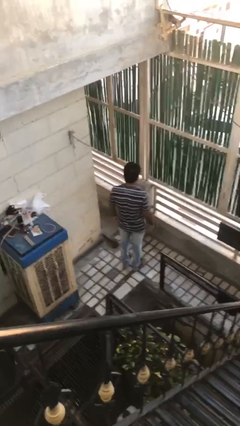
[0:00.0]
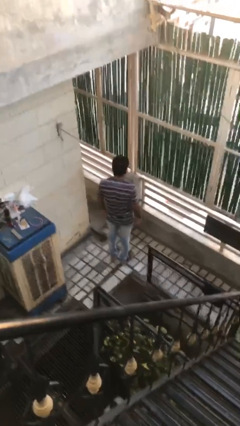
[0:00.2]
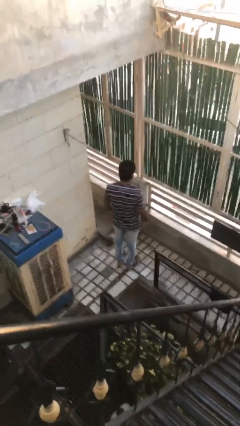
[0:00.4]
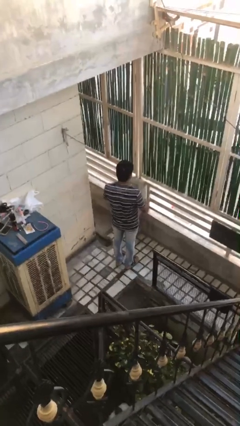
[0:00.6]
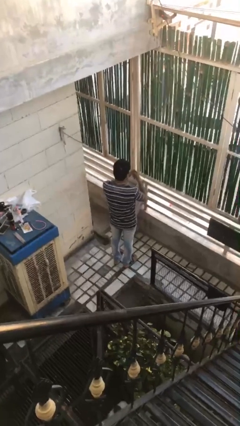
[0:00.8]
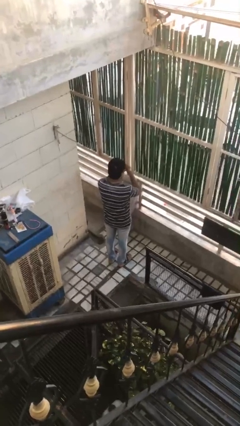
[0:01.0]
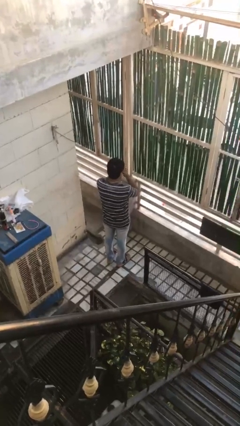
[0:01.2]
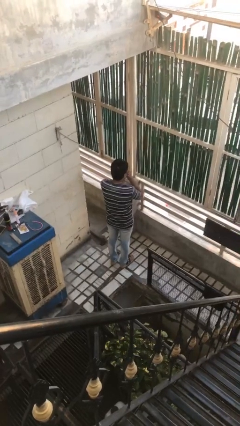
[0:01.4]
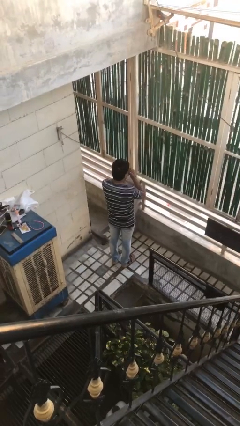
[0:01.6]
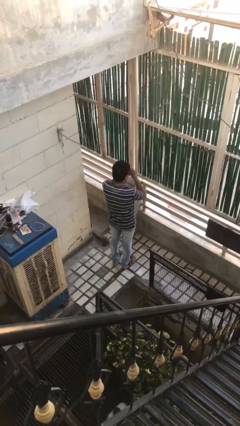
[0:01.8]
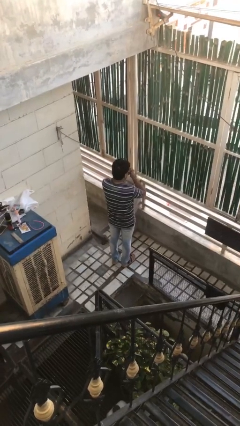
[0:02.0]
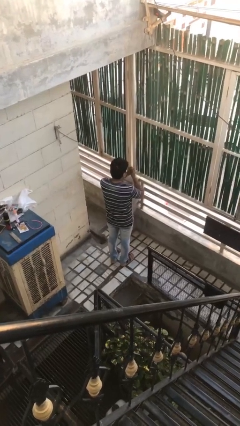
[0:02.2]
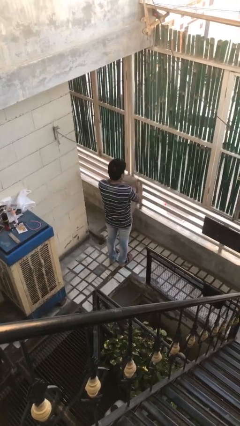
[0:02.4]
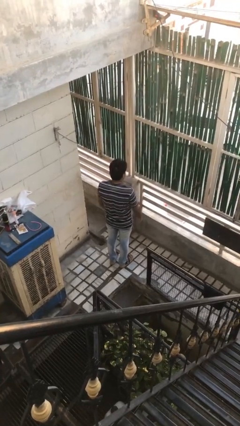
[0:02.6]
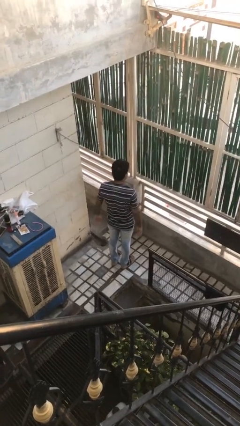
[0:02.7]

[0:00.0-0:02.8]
person snaps fingers

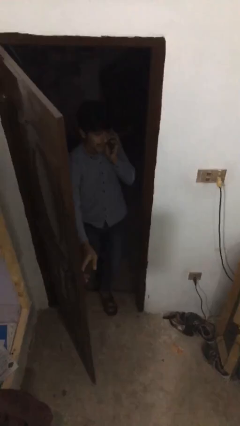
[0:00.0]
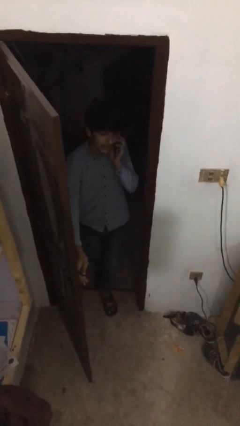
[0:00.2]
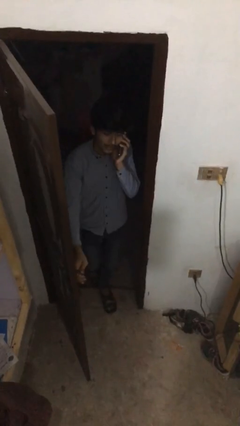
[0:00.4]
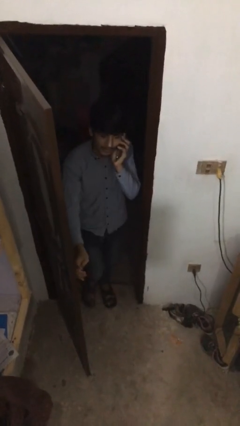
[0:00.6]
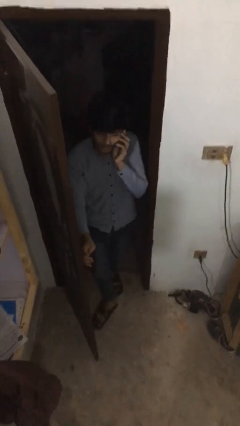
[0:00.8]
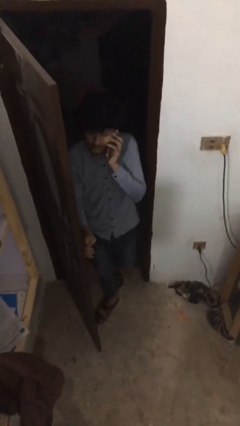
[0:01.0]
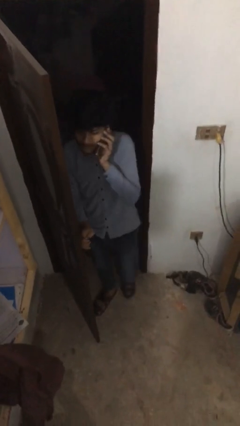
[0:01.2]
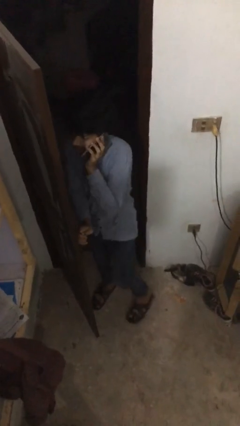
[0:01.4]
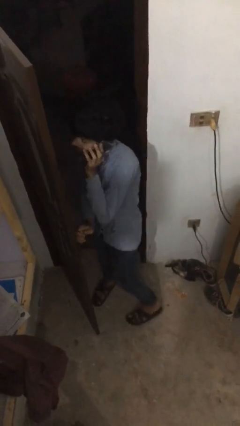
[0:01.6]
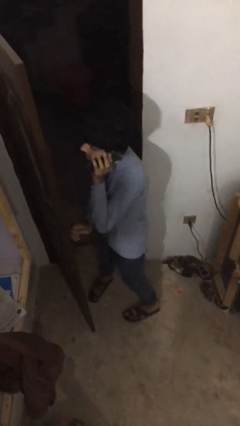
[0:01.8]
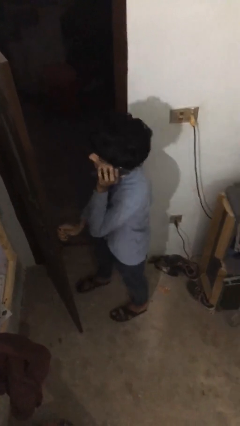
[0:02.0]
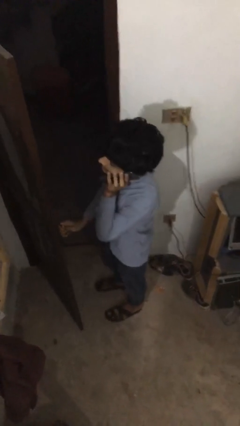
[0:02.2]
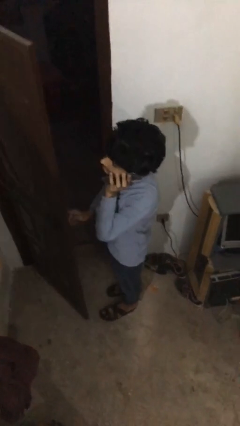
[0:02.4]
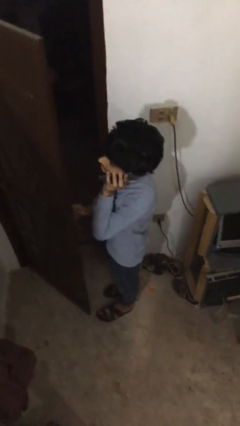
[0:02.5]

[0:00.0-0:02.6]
person enters scene through structure

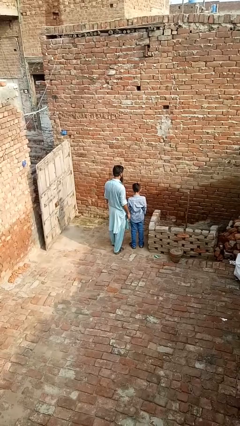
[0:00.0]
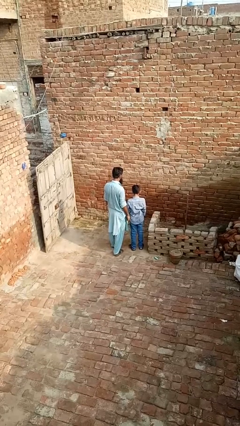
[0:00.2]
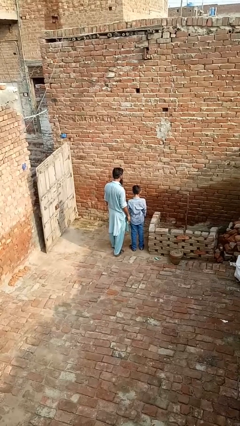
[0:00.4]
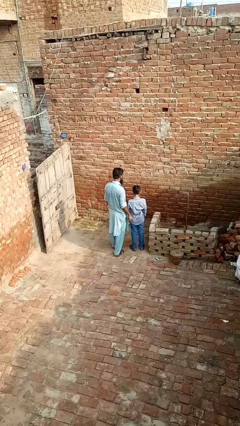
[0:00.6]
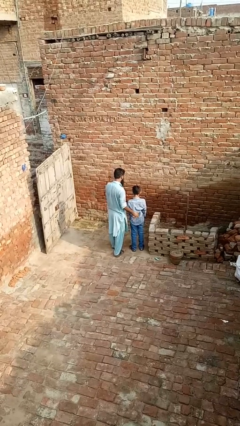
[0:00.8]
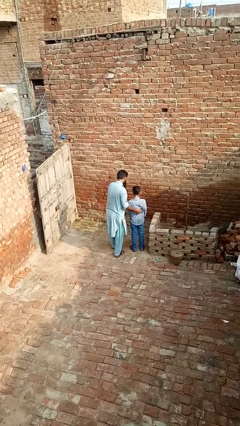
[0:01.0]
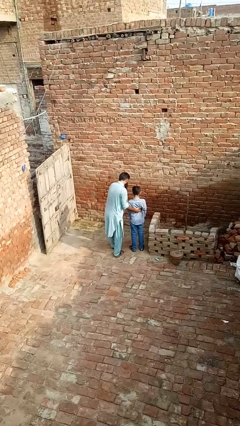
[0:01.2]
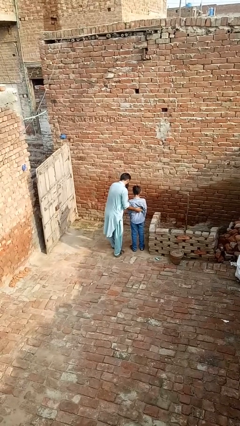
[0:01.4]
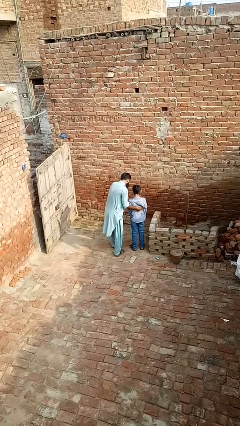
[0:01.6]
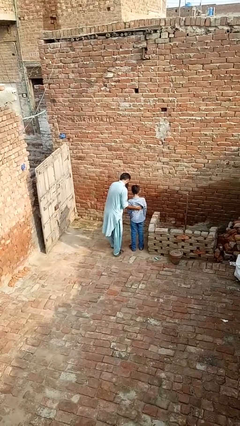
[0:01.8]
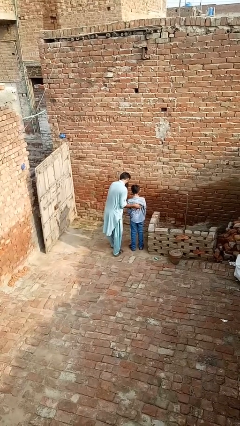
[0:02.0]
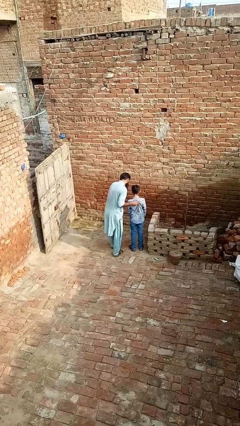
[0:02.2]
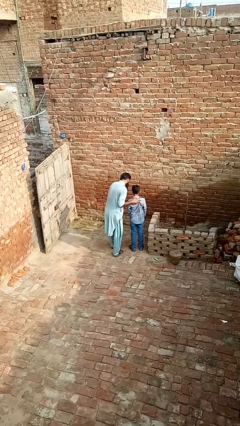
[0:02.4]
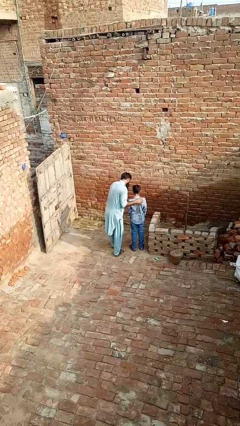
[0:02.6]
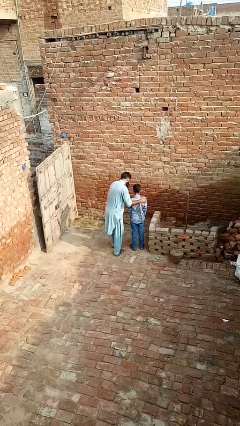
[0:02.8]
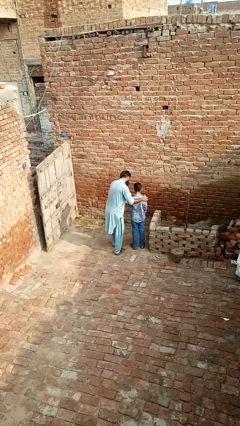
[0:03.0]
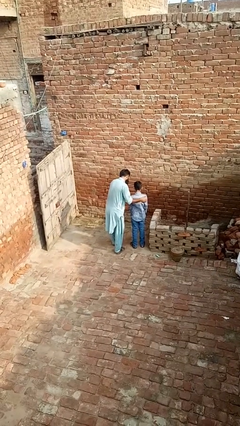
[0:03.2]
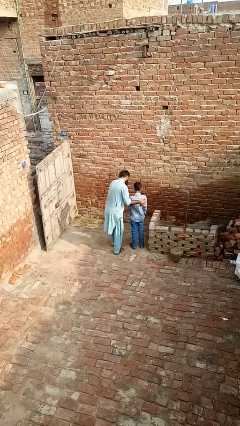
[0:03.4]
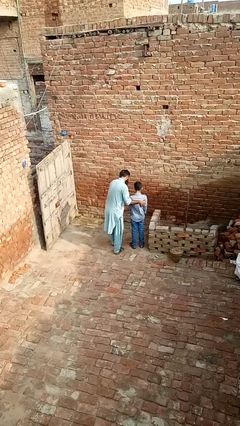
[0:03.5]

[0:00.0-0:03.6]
person tickles person

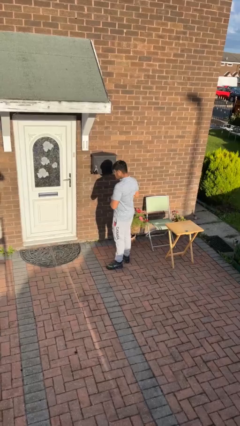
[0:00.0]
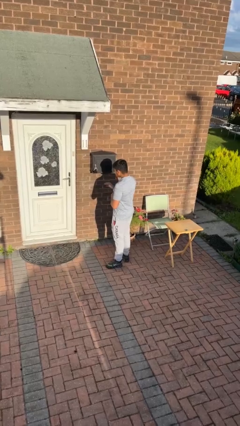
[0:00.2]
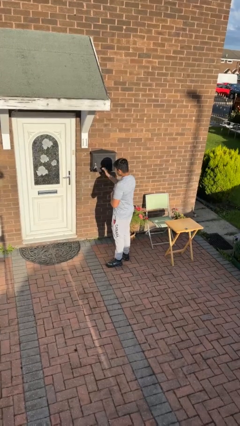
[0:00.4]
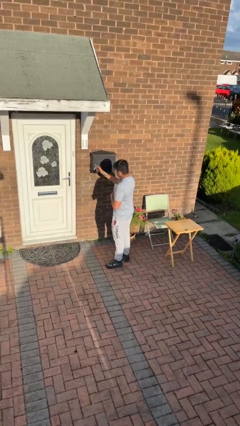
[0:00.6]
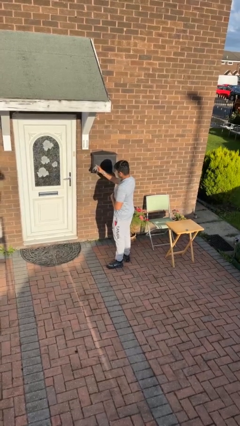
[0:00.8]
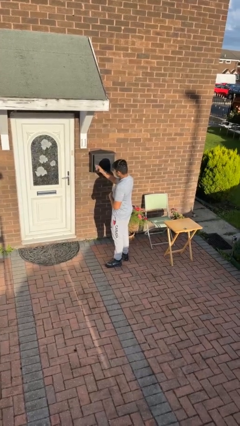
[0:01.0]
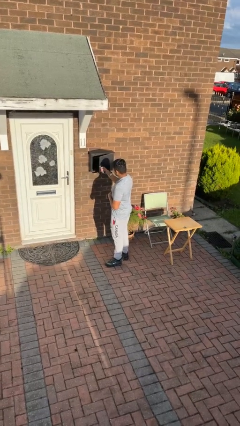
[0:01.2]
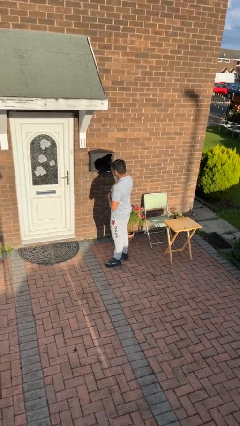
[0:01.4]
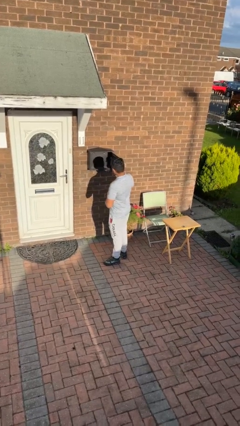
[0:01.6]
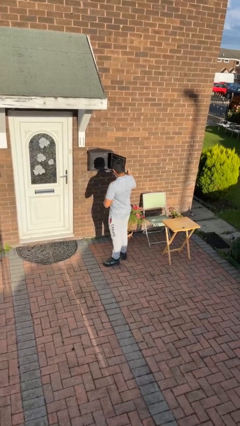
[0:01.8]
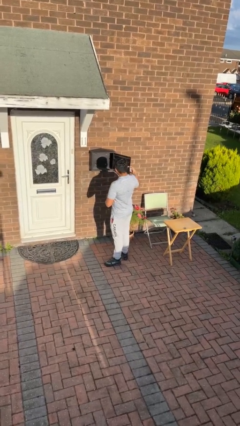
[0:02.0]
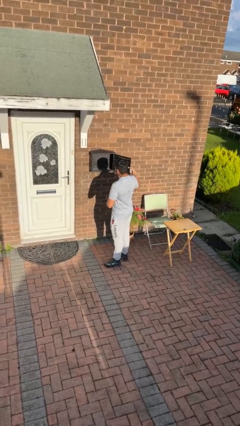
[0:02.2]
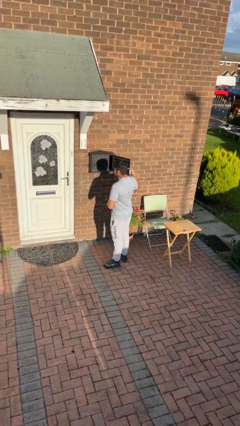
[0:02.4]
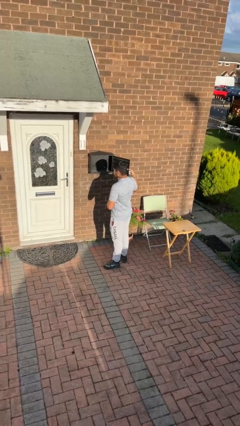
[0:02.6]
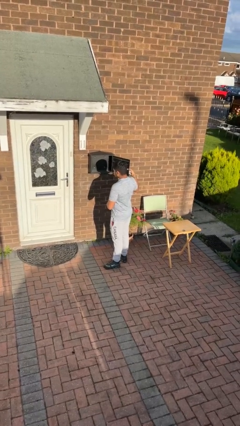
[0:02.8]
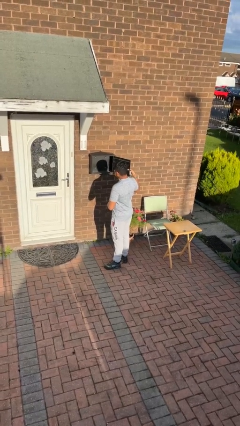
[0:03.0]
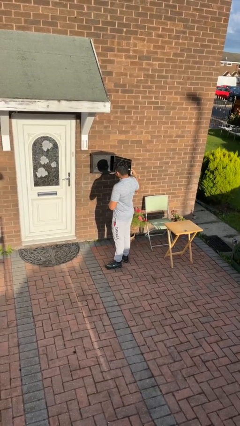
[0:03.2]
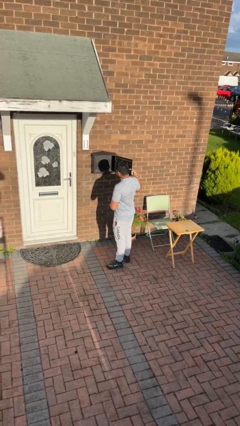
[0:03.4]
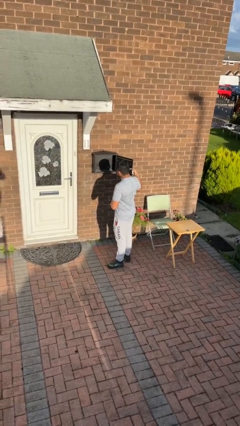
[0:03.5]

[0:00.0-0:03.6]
person opens mailbox

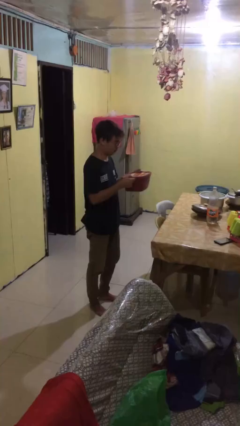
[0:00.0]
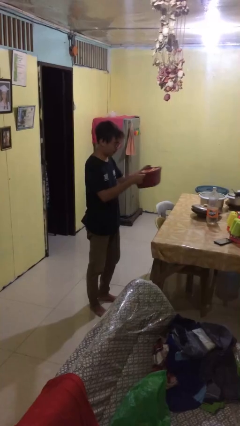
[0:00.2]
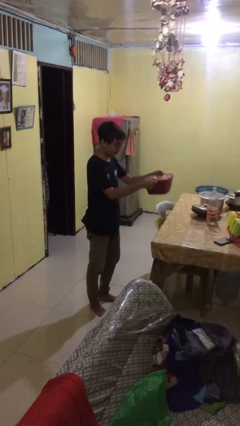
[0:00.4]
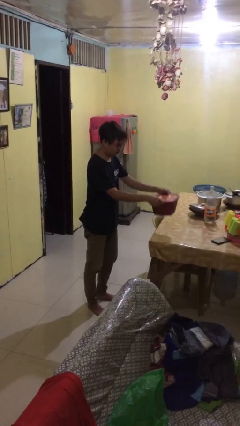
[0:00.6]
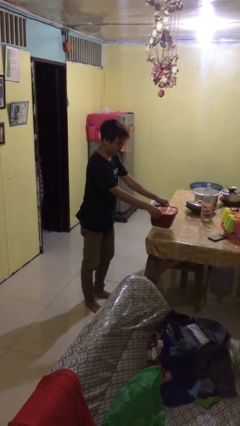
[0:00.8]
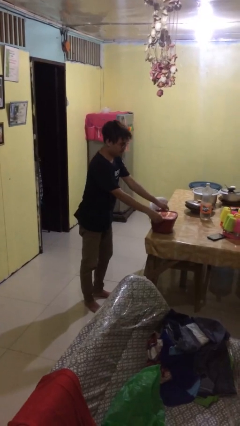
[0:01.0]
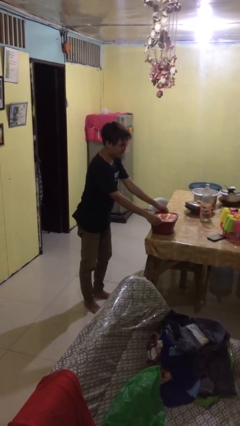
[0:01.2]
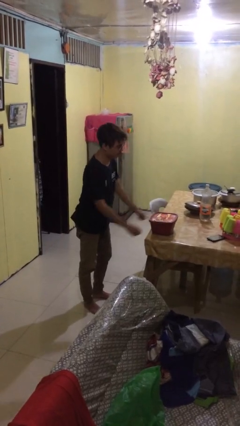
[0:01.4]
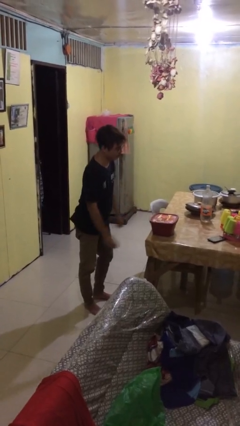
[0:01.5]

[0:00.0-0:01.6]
person puts down object on table

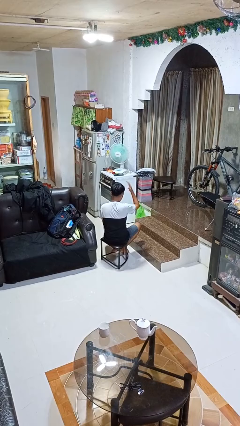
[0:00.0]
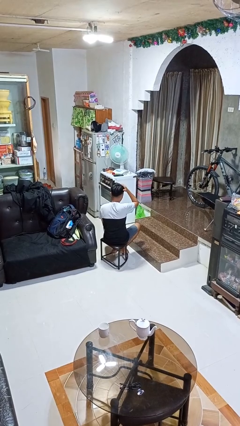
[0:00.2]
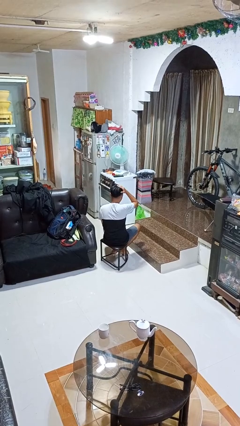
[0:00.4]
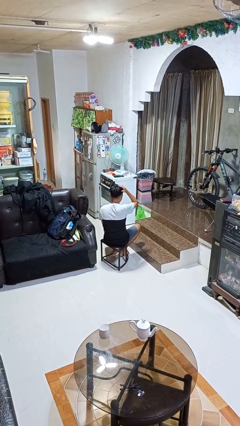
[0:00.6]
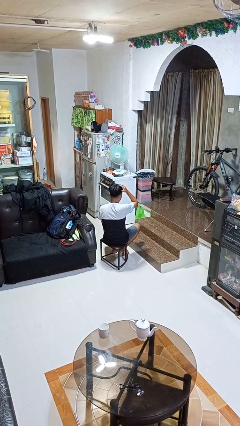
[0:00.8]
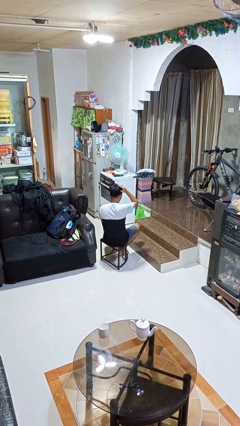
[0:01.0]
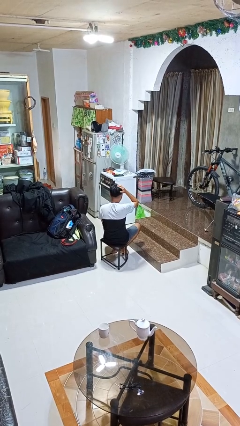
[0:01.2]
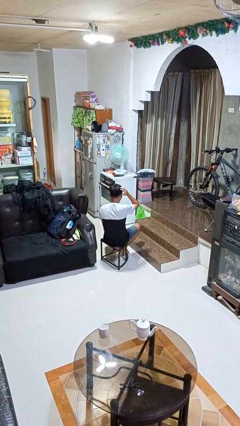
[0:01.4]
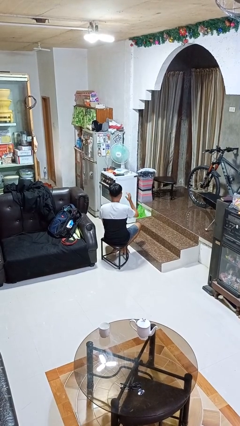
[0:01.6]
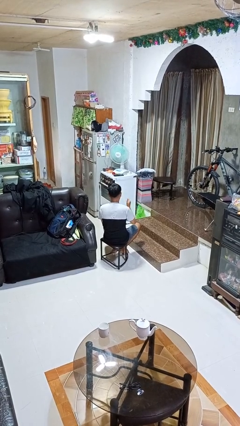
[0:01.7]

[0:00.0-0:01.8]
person pats head

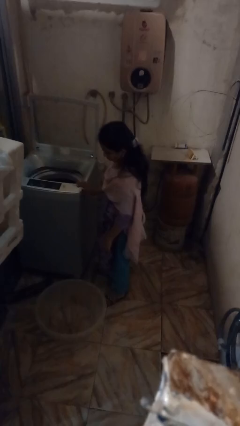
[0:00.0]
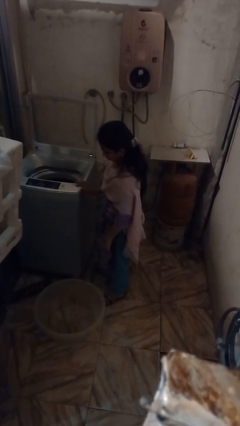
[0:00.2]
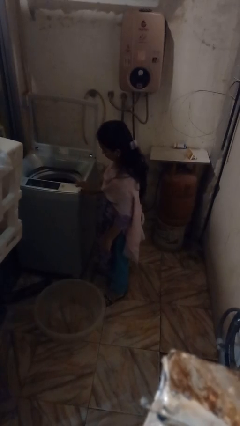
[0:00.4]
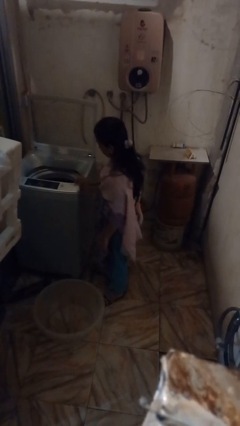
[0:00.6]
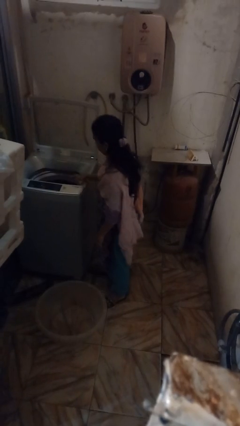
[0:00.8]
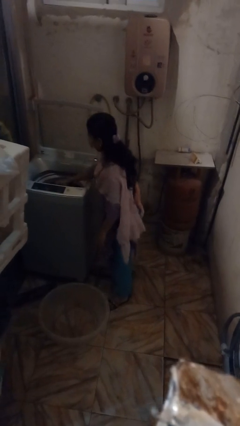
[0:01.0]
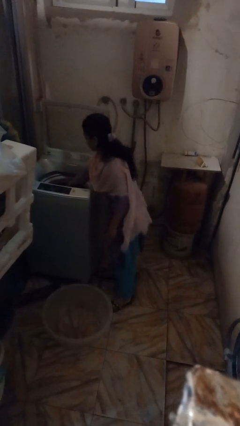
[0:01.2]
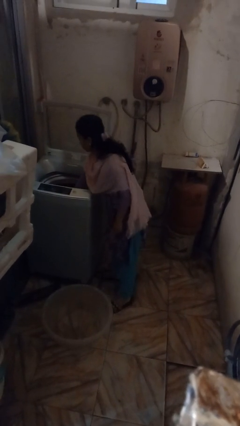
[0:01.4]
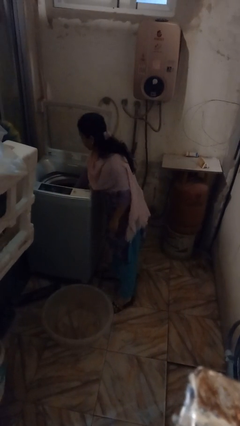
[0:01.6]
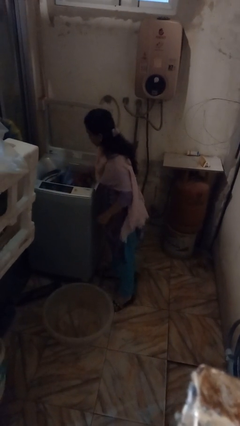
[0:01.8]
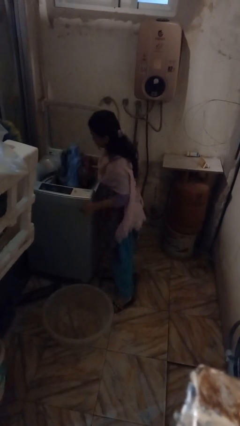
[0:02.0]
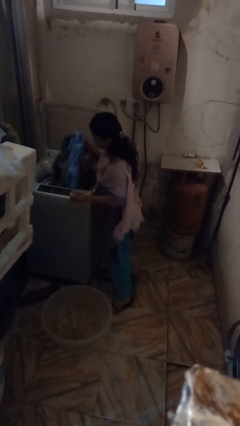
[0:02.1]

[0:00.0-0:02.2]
person unloads clotheswasher
